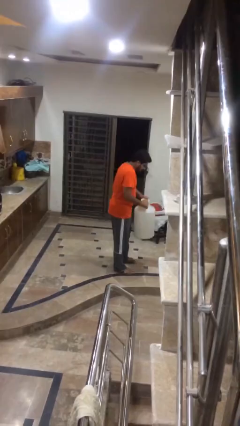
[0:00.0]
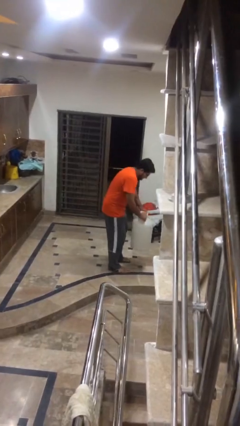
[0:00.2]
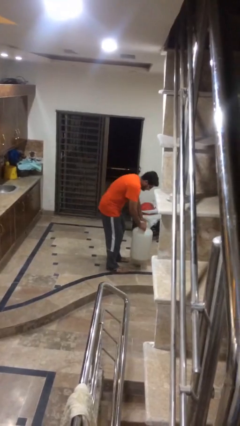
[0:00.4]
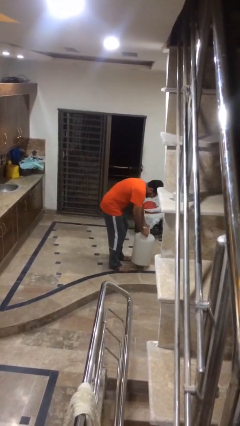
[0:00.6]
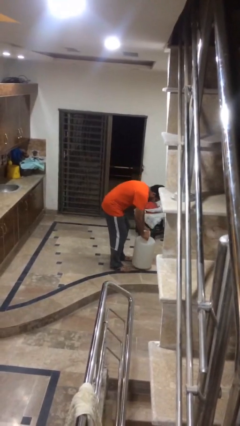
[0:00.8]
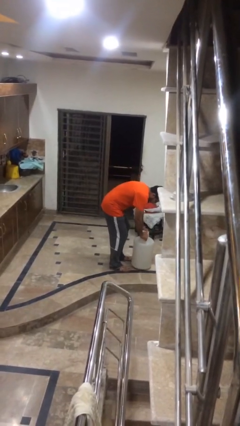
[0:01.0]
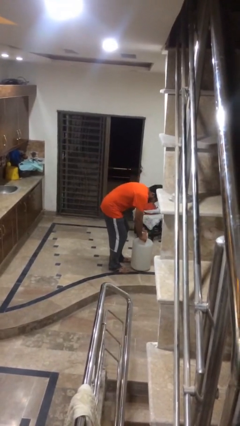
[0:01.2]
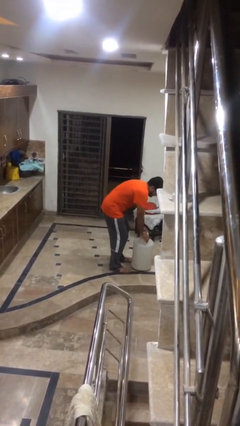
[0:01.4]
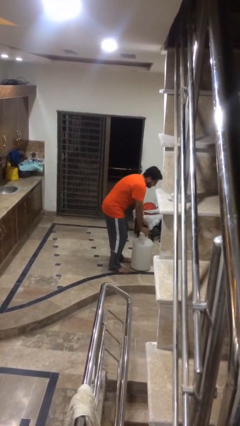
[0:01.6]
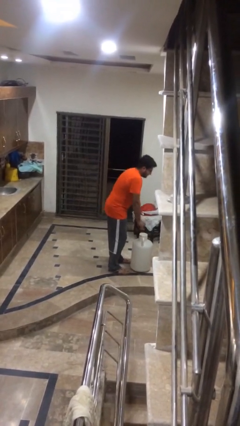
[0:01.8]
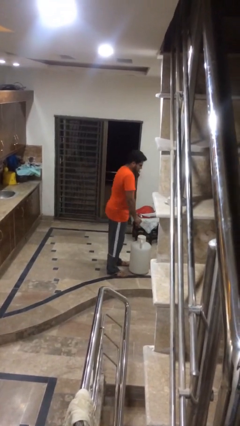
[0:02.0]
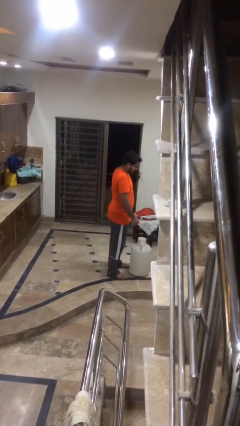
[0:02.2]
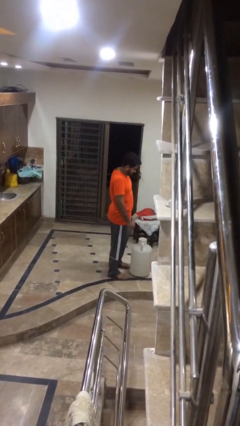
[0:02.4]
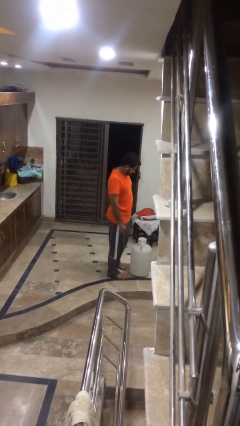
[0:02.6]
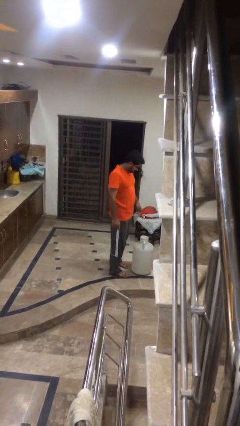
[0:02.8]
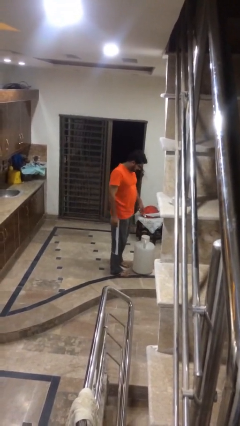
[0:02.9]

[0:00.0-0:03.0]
person puts down object on floor

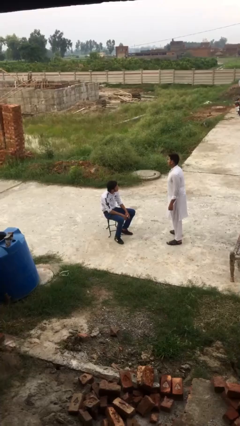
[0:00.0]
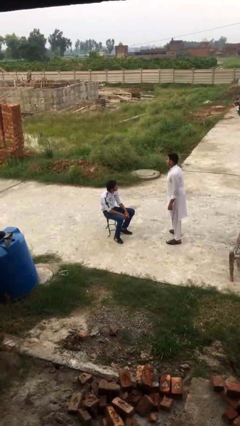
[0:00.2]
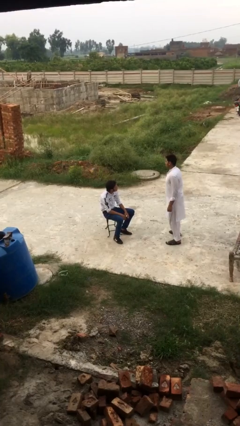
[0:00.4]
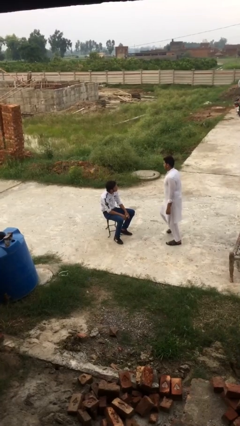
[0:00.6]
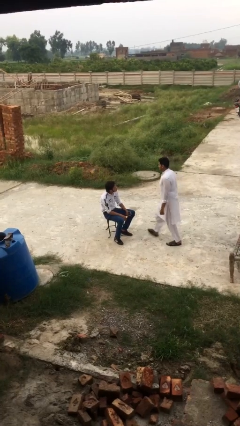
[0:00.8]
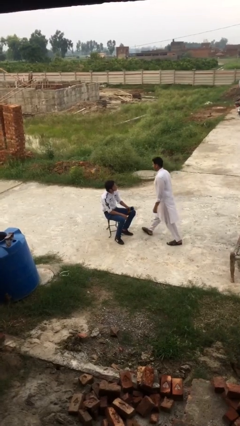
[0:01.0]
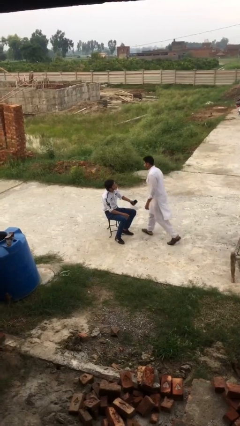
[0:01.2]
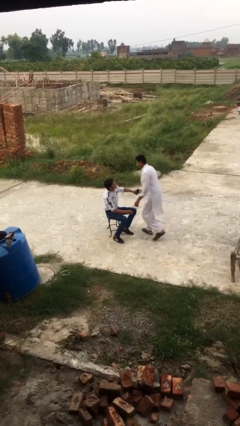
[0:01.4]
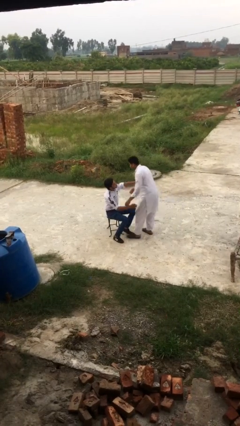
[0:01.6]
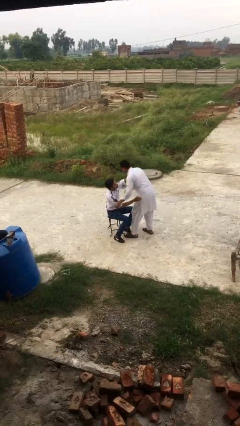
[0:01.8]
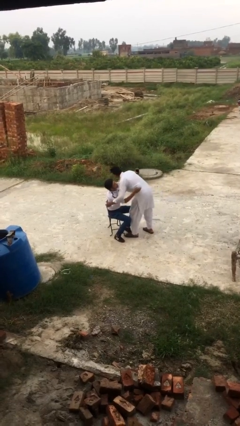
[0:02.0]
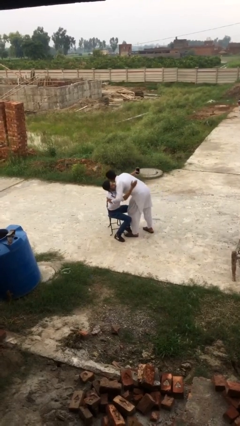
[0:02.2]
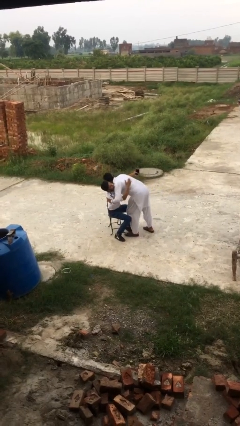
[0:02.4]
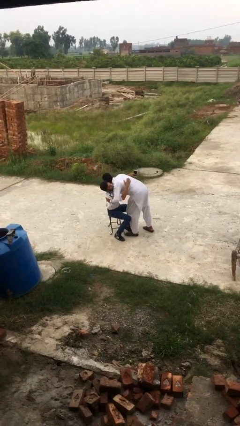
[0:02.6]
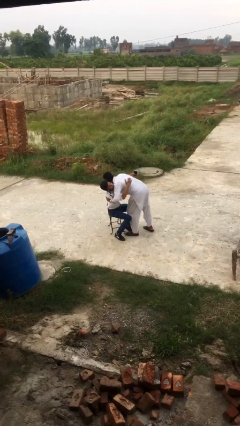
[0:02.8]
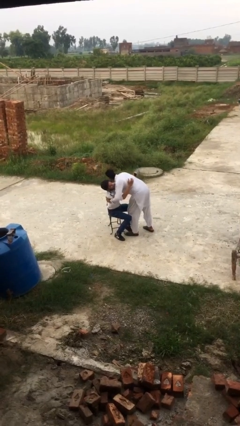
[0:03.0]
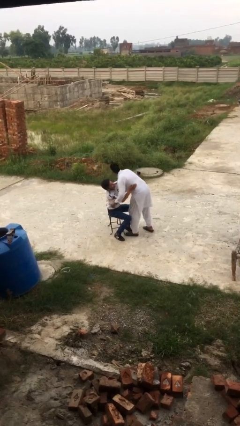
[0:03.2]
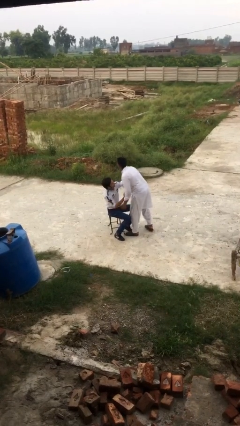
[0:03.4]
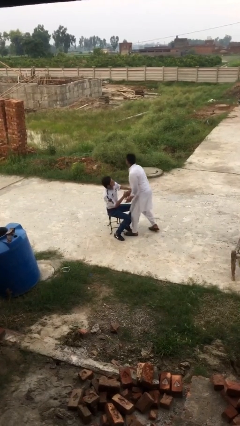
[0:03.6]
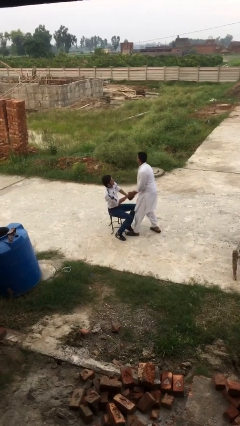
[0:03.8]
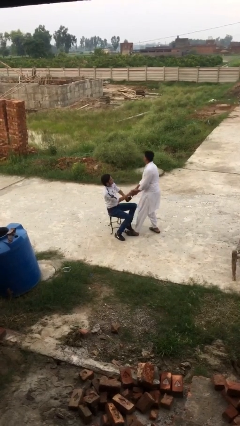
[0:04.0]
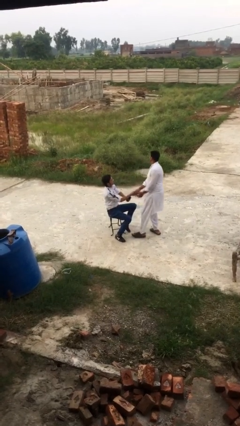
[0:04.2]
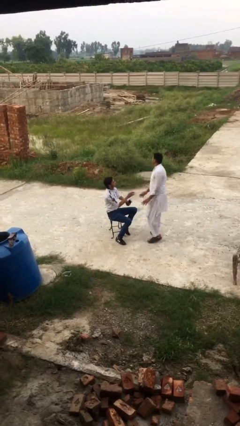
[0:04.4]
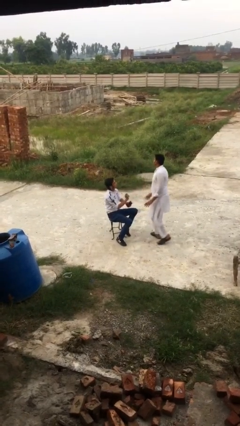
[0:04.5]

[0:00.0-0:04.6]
person embraces person

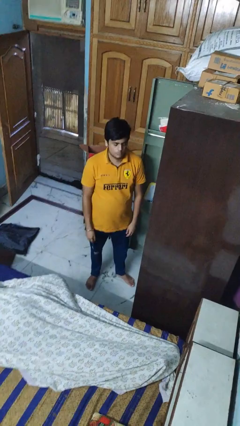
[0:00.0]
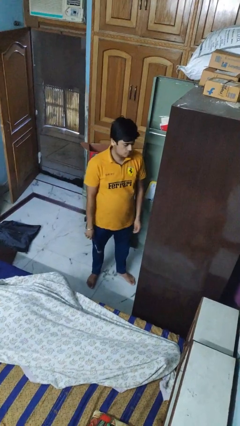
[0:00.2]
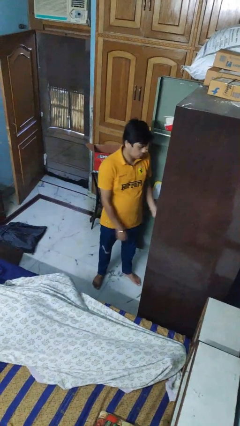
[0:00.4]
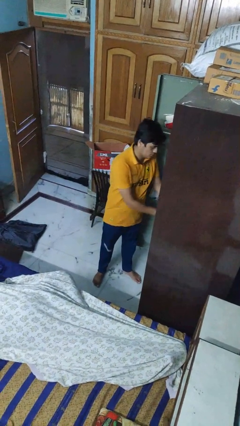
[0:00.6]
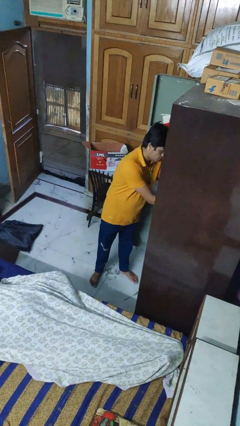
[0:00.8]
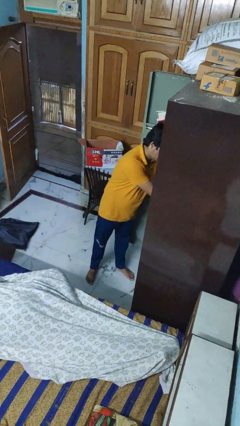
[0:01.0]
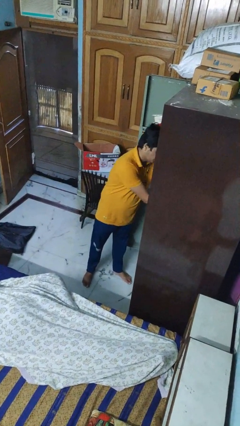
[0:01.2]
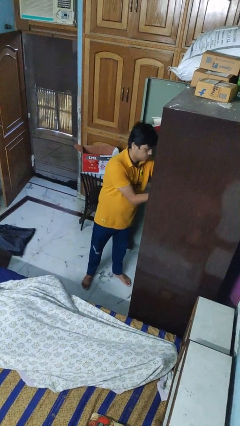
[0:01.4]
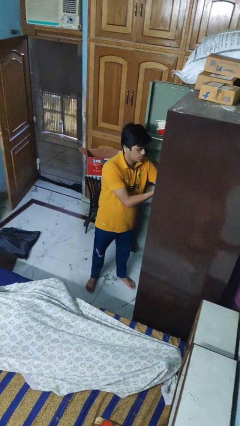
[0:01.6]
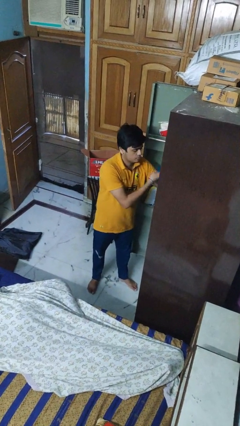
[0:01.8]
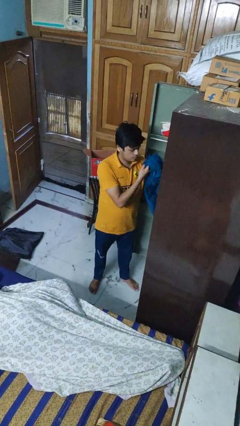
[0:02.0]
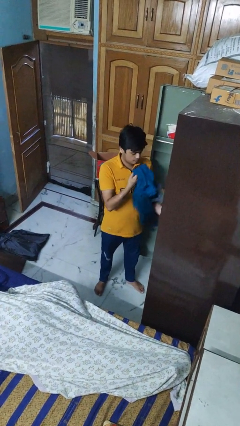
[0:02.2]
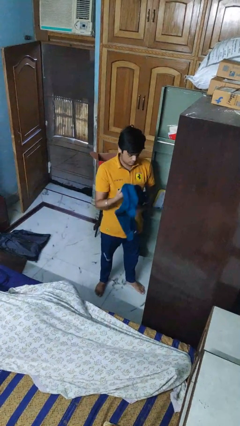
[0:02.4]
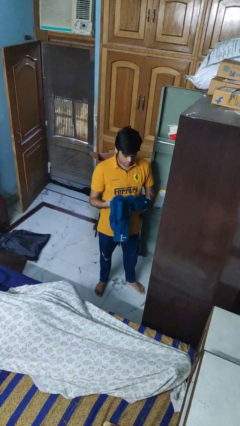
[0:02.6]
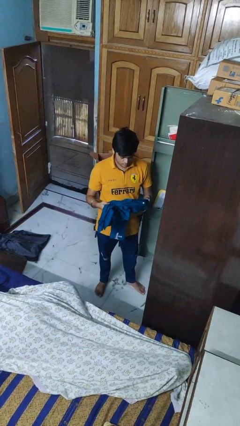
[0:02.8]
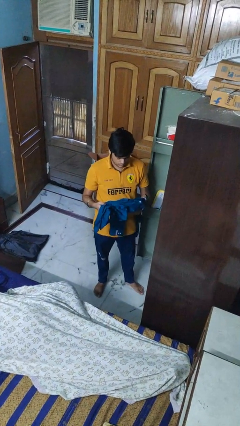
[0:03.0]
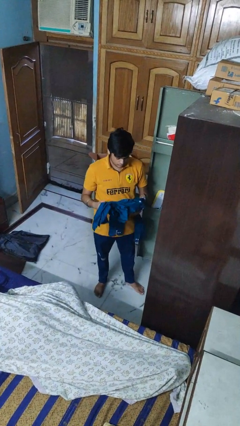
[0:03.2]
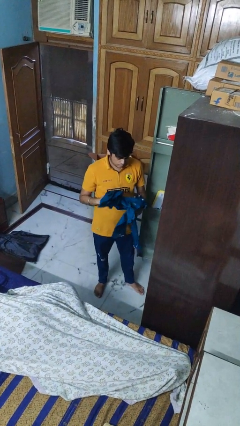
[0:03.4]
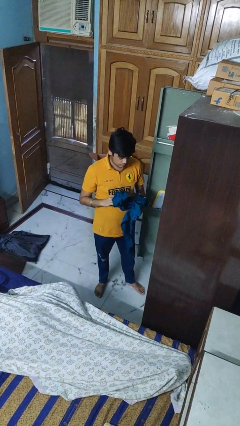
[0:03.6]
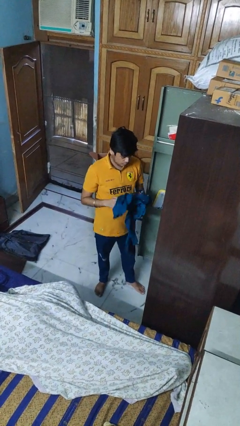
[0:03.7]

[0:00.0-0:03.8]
person takes clothes from dresser

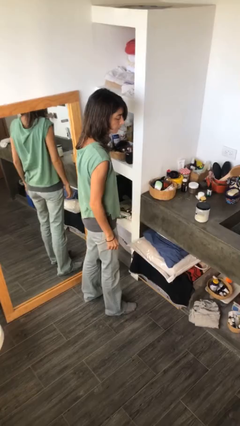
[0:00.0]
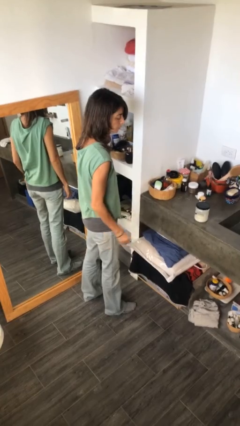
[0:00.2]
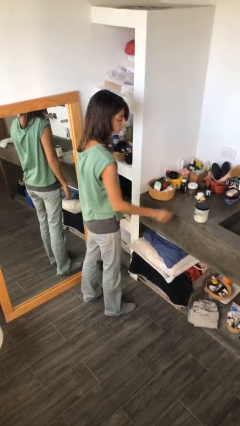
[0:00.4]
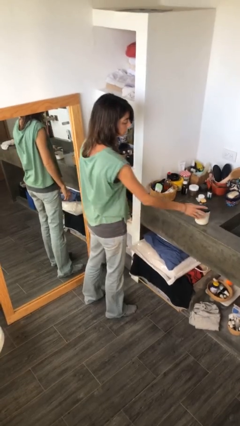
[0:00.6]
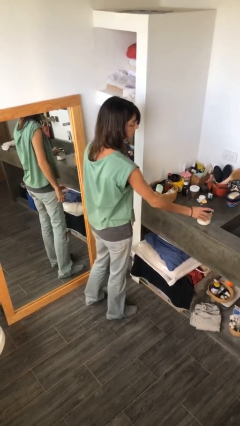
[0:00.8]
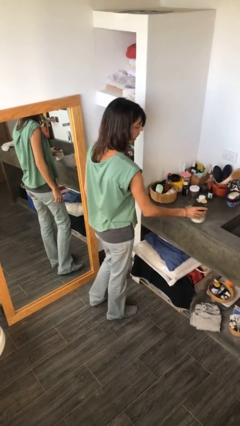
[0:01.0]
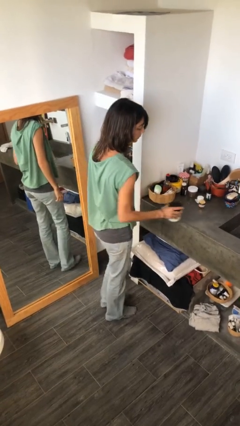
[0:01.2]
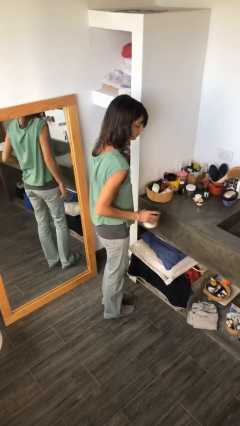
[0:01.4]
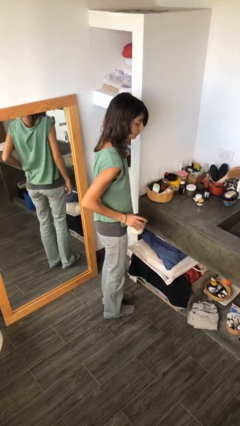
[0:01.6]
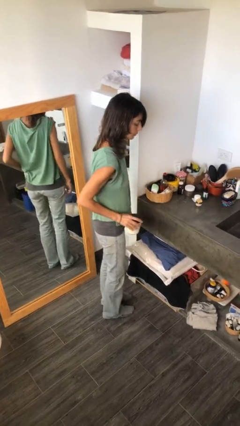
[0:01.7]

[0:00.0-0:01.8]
person picks up object from countertop

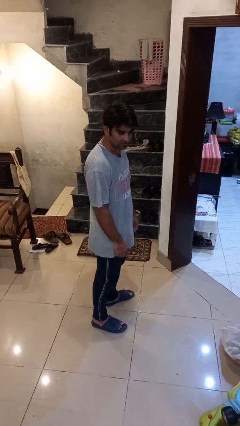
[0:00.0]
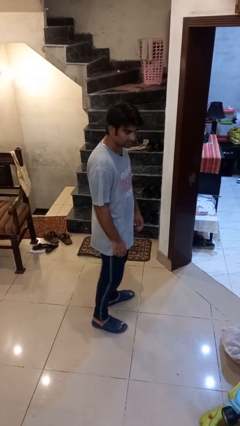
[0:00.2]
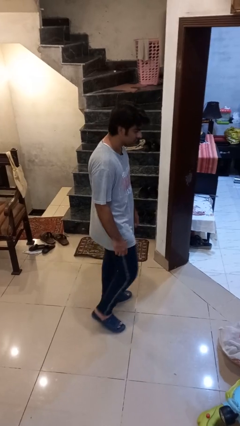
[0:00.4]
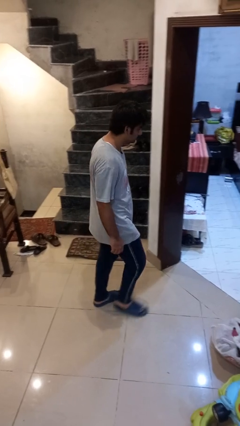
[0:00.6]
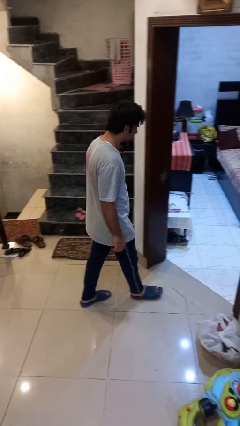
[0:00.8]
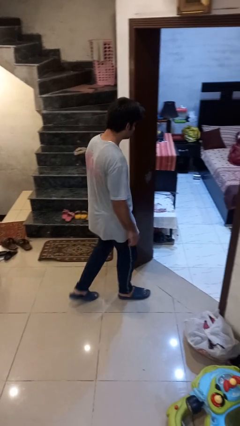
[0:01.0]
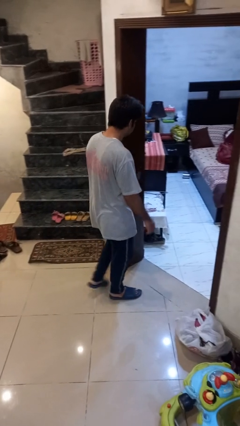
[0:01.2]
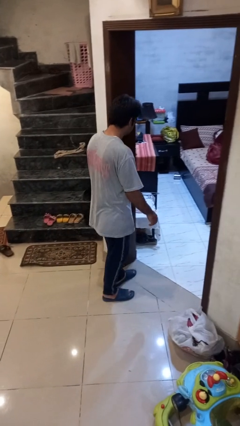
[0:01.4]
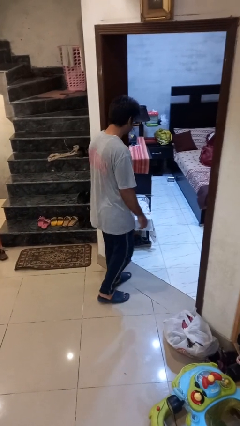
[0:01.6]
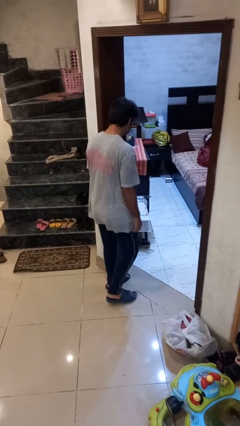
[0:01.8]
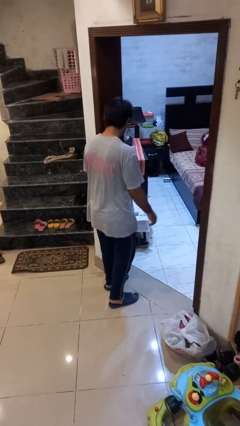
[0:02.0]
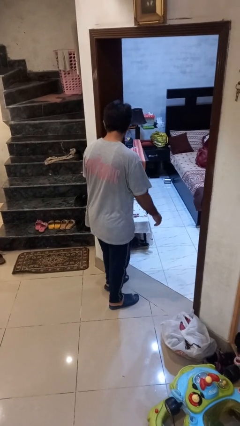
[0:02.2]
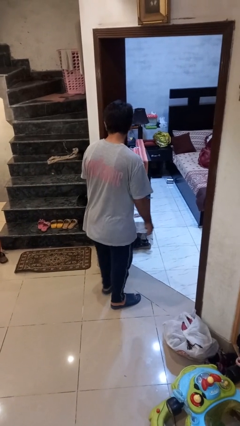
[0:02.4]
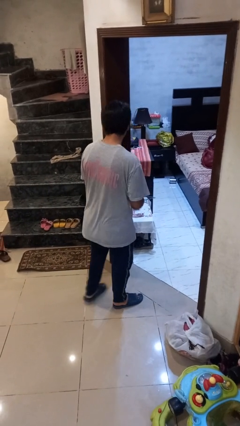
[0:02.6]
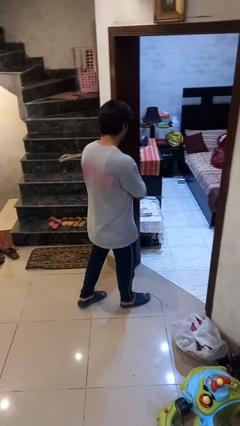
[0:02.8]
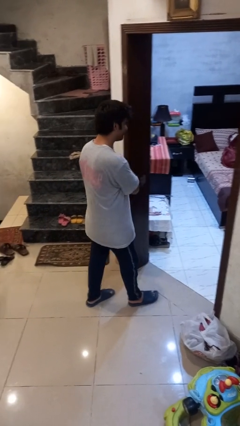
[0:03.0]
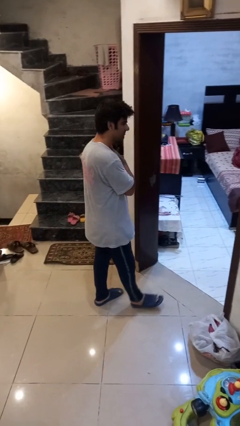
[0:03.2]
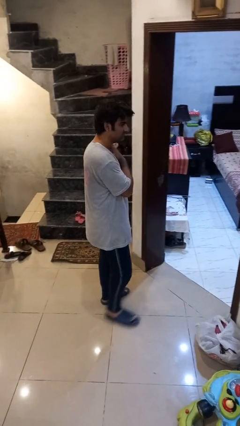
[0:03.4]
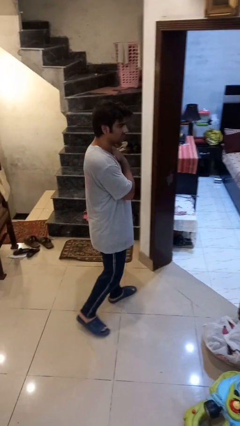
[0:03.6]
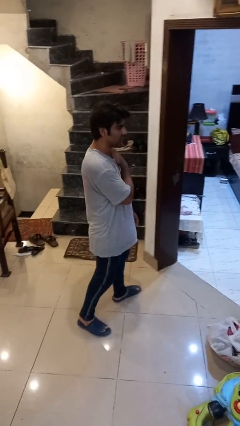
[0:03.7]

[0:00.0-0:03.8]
person bumps into wall

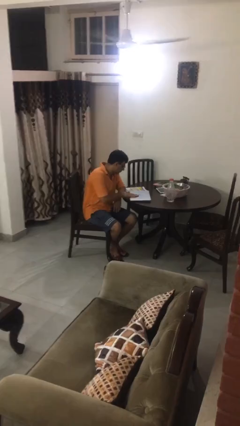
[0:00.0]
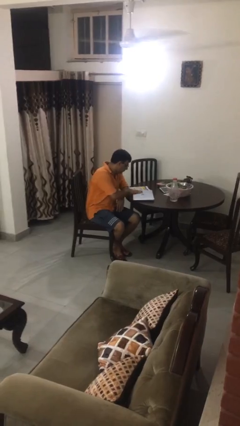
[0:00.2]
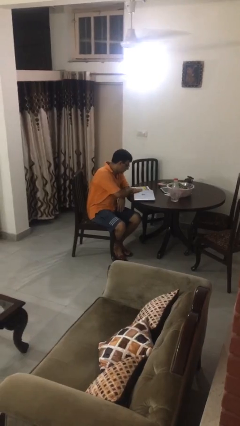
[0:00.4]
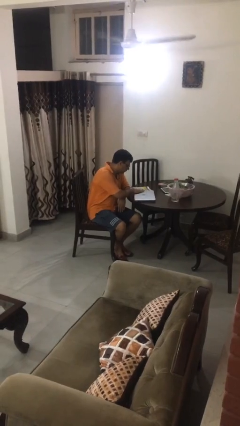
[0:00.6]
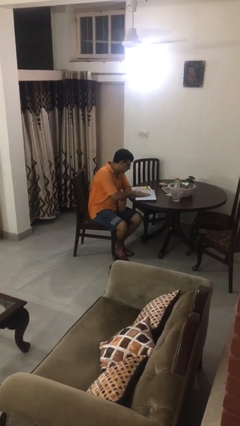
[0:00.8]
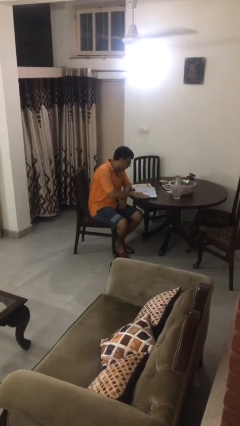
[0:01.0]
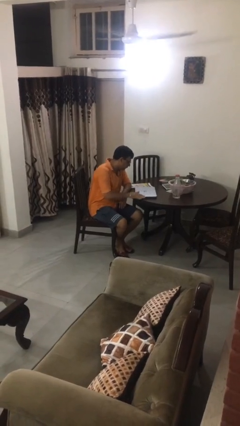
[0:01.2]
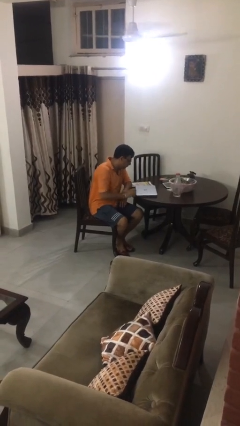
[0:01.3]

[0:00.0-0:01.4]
person waves hand over object
